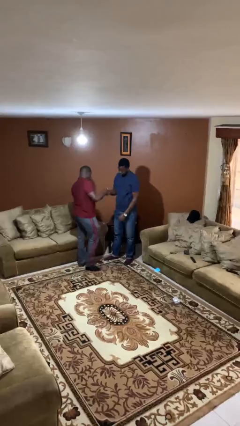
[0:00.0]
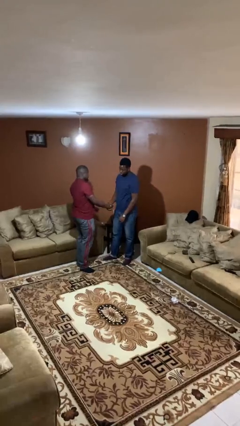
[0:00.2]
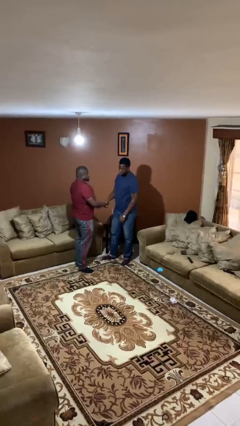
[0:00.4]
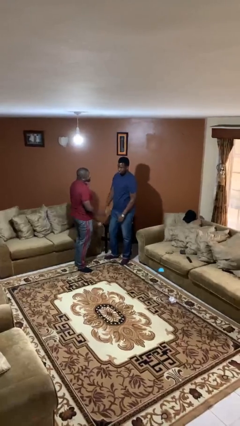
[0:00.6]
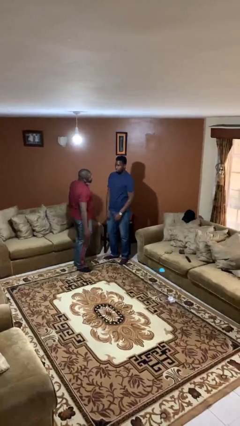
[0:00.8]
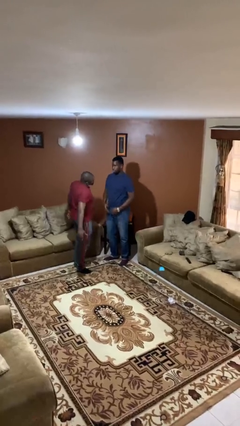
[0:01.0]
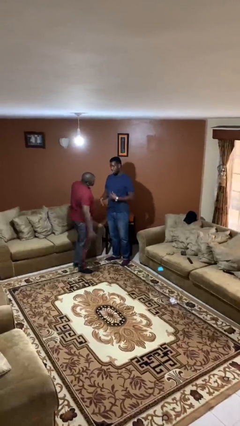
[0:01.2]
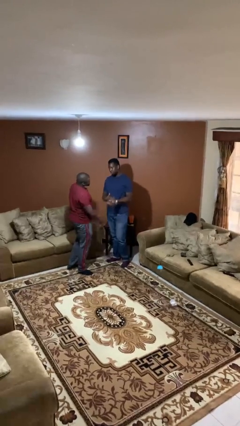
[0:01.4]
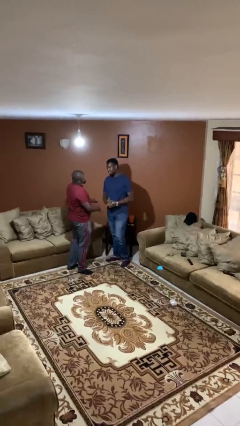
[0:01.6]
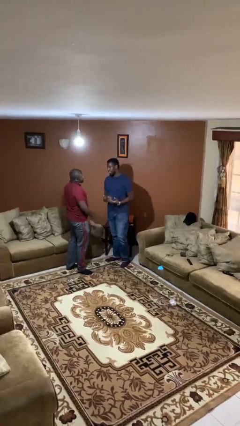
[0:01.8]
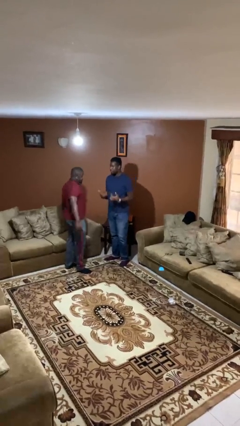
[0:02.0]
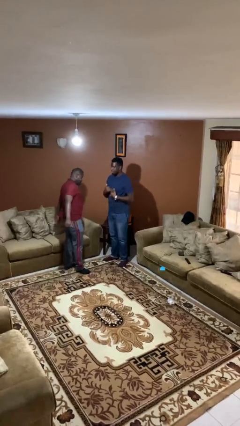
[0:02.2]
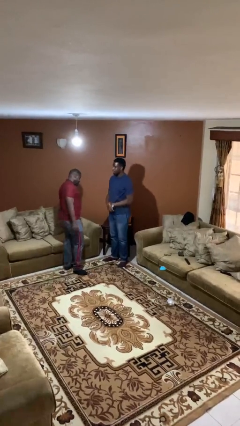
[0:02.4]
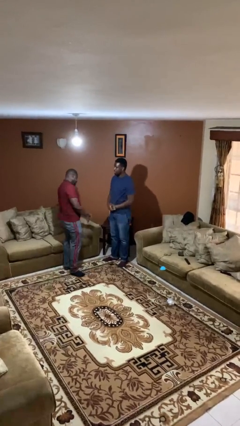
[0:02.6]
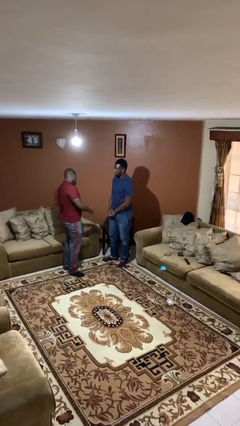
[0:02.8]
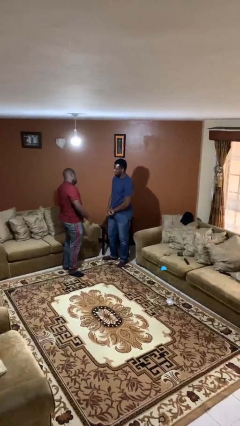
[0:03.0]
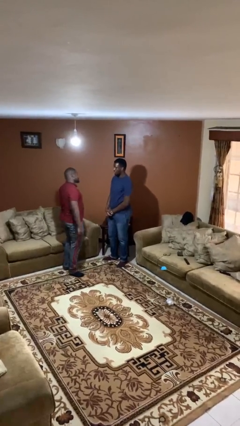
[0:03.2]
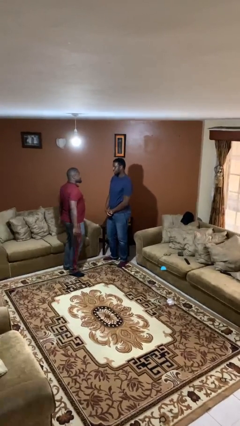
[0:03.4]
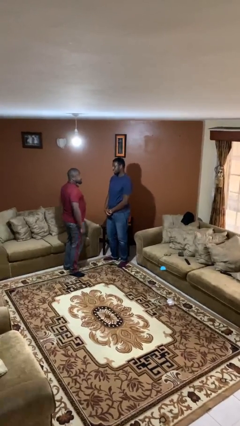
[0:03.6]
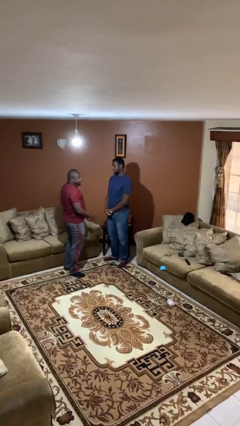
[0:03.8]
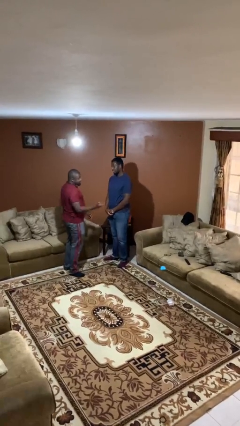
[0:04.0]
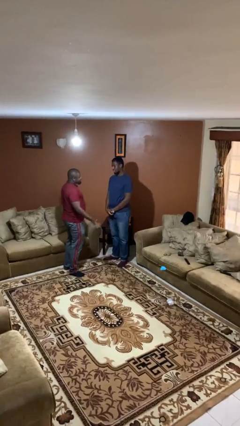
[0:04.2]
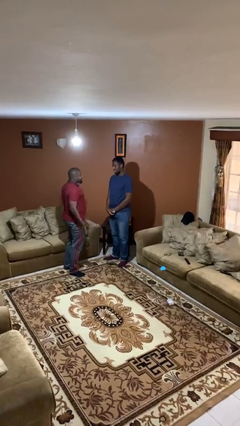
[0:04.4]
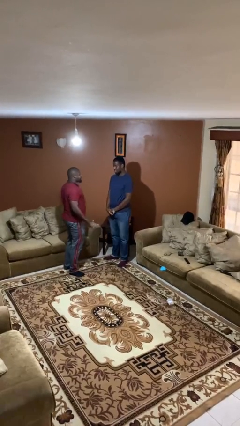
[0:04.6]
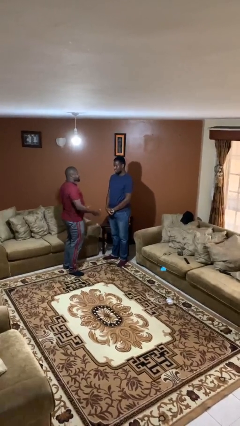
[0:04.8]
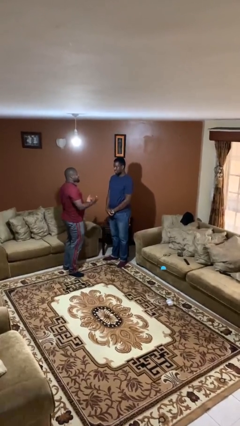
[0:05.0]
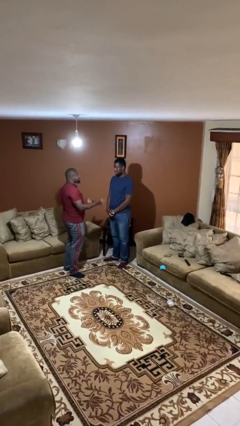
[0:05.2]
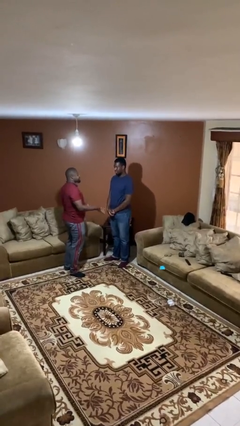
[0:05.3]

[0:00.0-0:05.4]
person talks to person

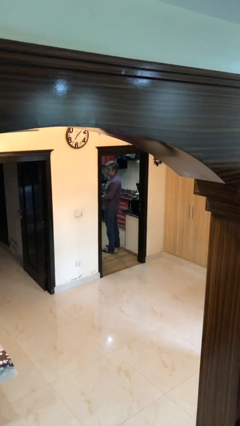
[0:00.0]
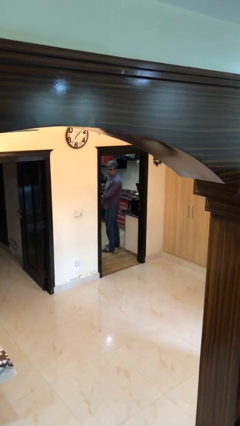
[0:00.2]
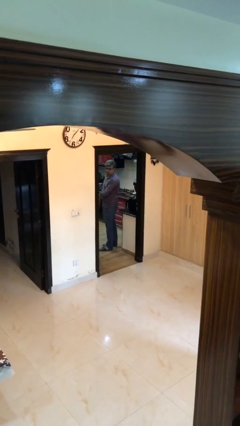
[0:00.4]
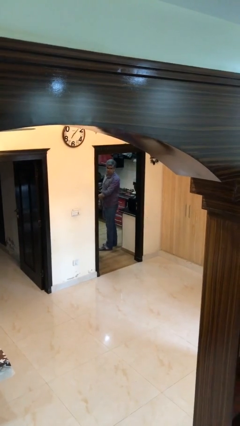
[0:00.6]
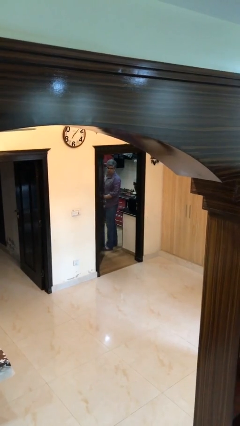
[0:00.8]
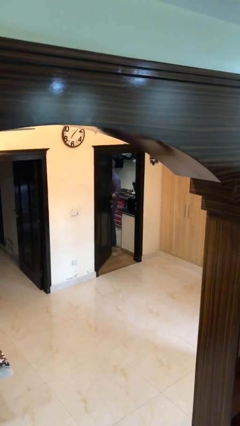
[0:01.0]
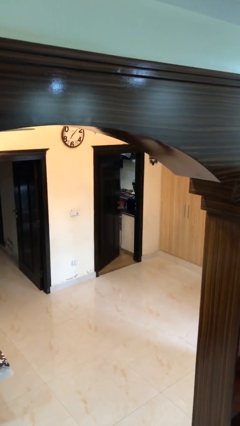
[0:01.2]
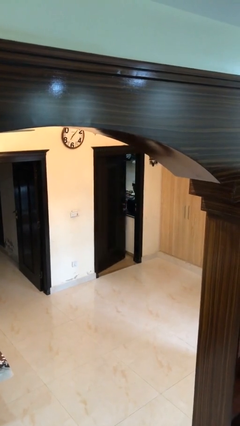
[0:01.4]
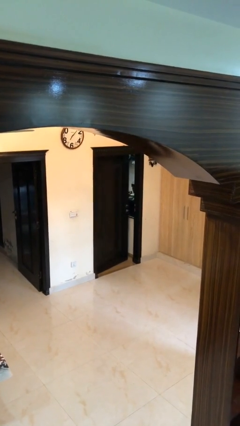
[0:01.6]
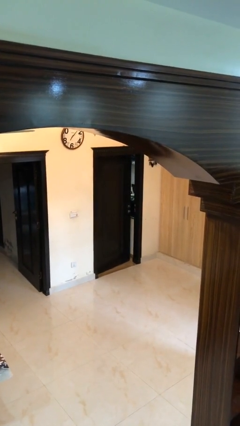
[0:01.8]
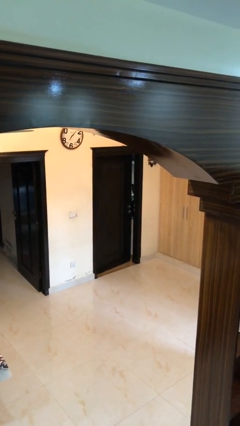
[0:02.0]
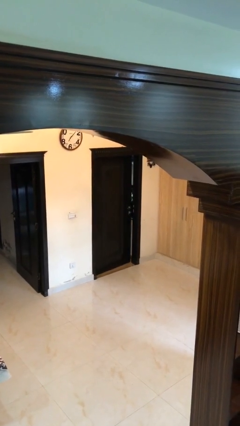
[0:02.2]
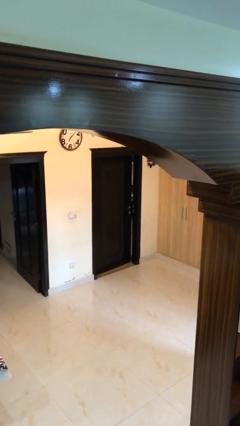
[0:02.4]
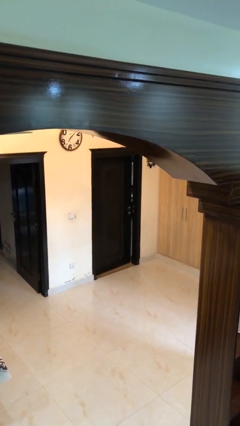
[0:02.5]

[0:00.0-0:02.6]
person closes facility door

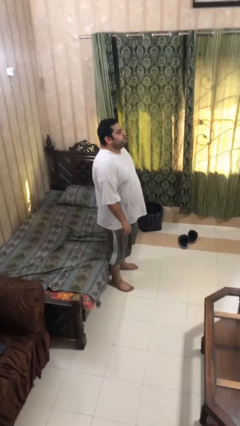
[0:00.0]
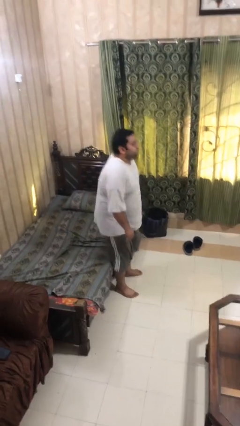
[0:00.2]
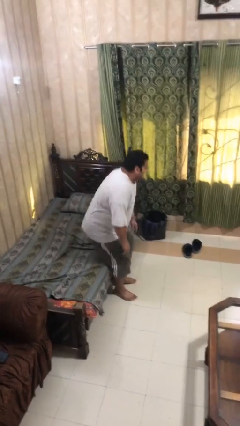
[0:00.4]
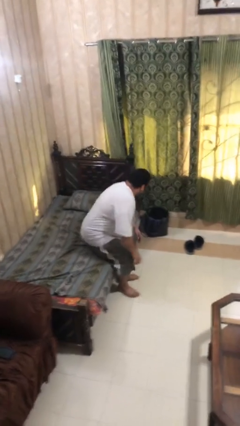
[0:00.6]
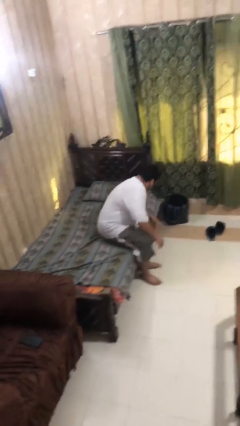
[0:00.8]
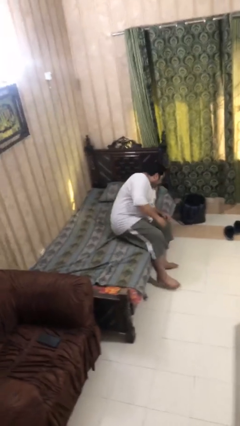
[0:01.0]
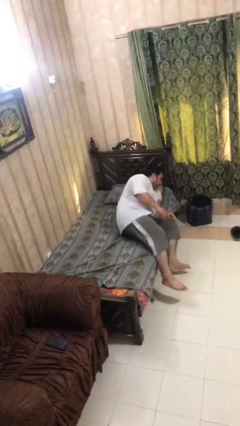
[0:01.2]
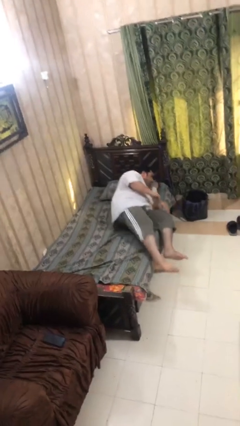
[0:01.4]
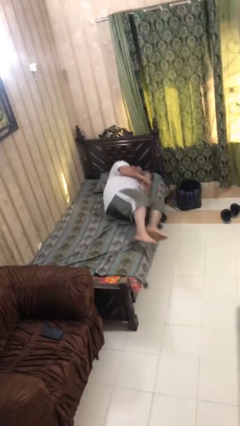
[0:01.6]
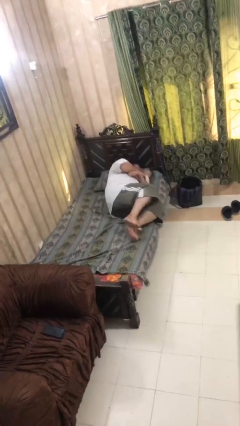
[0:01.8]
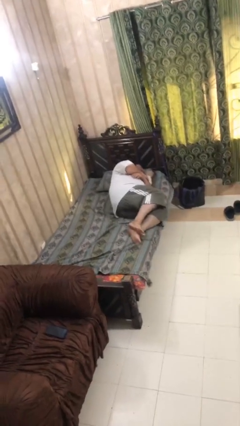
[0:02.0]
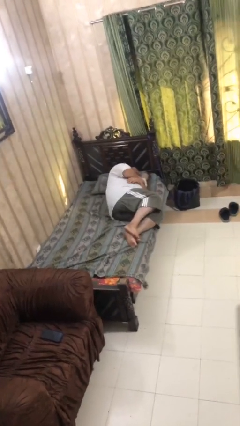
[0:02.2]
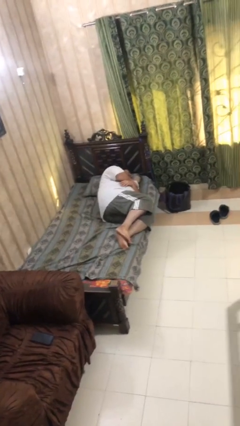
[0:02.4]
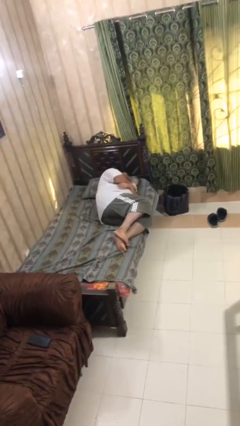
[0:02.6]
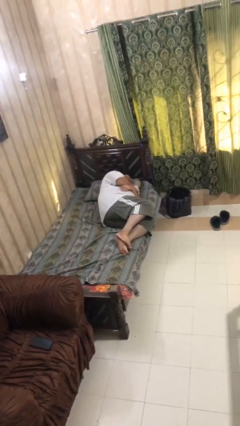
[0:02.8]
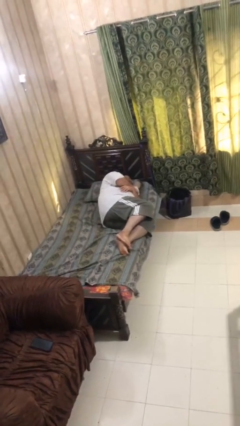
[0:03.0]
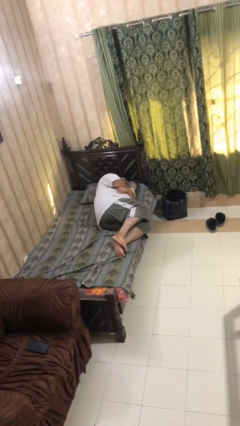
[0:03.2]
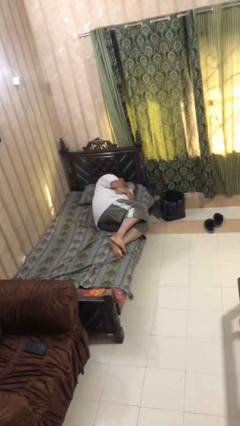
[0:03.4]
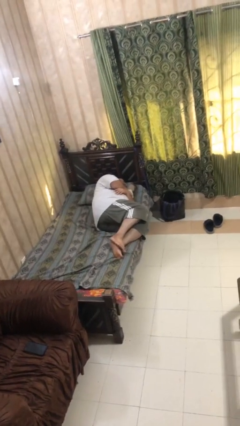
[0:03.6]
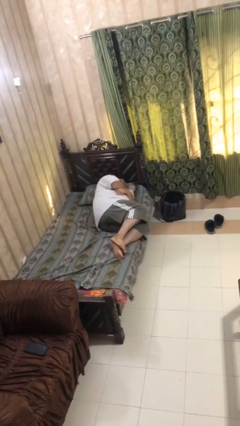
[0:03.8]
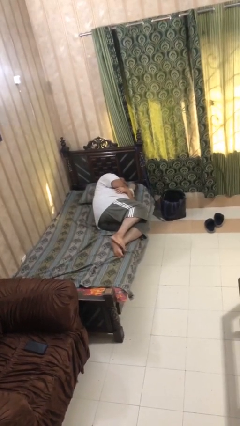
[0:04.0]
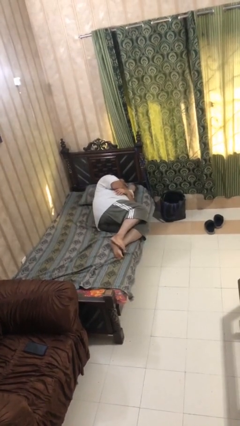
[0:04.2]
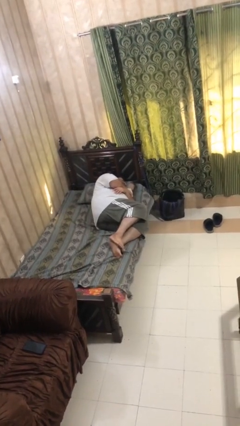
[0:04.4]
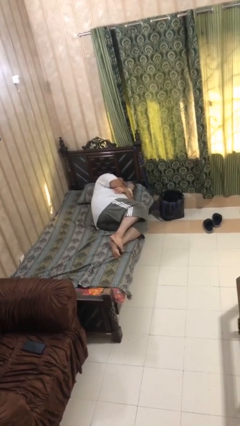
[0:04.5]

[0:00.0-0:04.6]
person lies down on bed

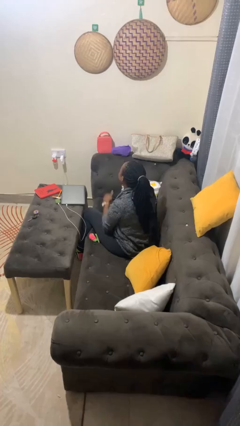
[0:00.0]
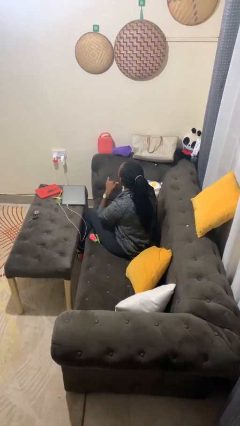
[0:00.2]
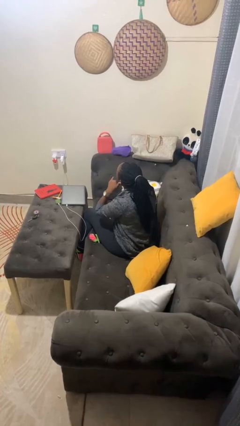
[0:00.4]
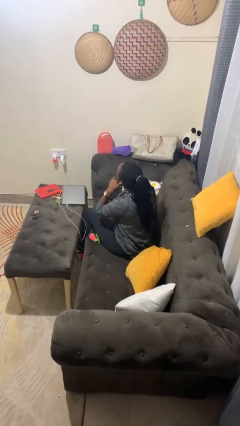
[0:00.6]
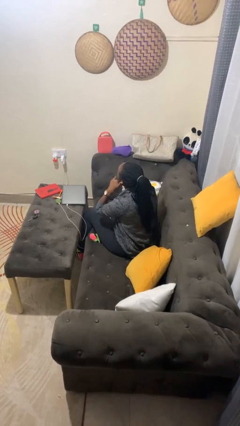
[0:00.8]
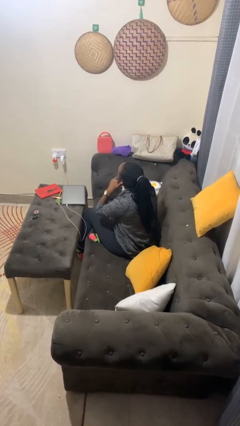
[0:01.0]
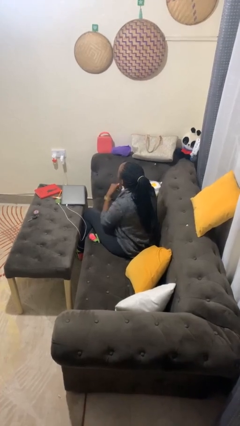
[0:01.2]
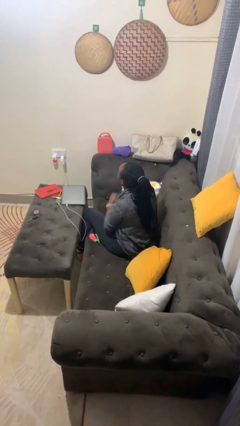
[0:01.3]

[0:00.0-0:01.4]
person gestures call me

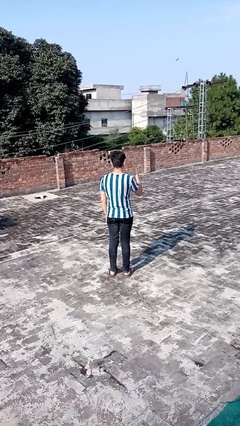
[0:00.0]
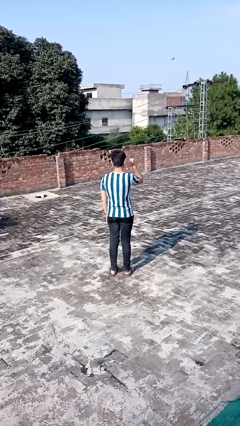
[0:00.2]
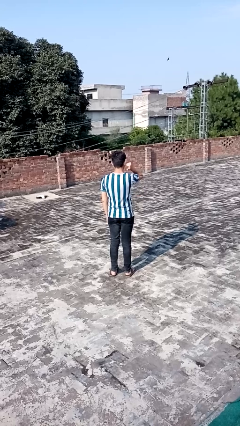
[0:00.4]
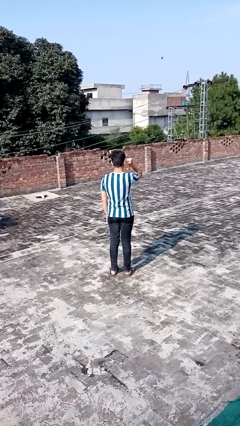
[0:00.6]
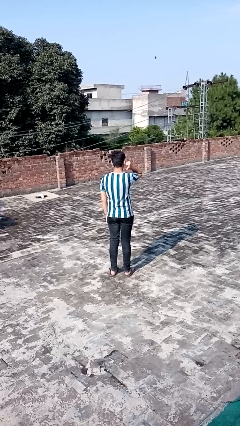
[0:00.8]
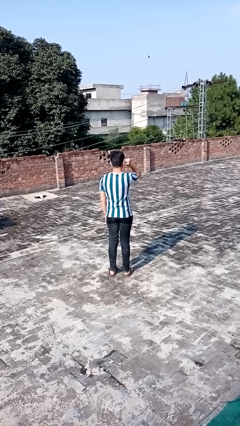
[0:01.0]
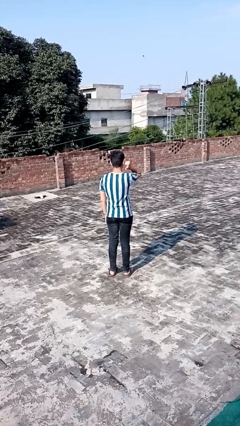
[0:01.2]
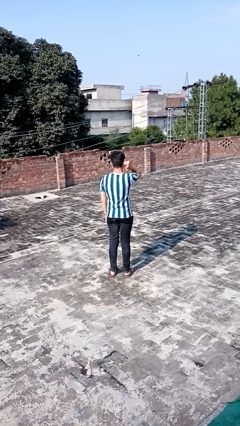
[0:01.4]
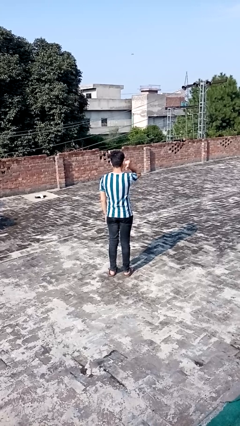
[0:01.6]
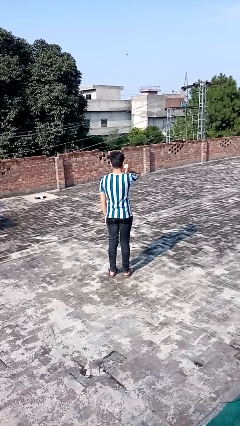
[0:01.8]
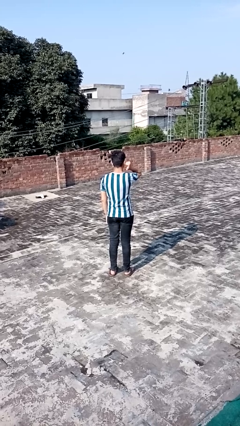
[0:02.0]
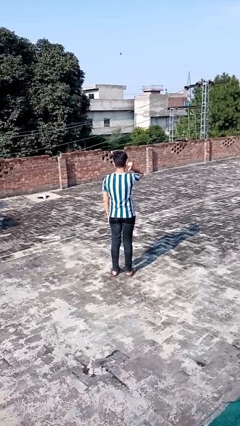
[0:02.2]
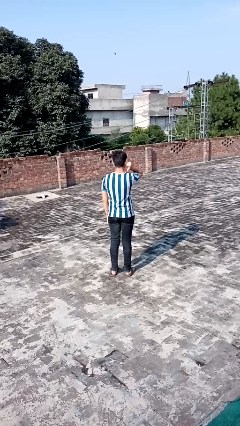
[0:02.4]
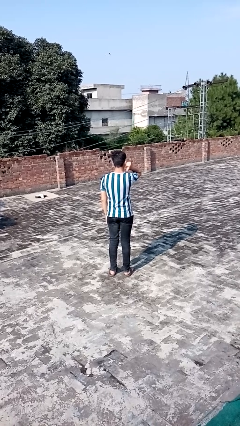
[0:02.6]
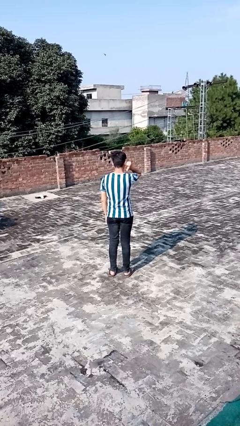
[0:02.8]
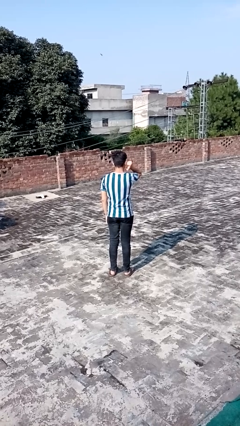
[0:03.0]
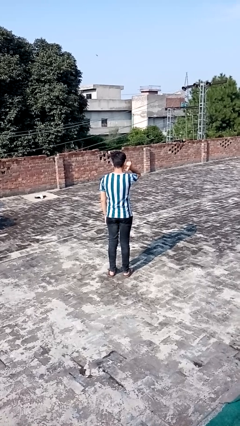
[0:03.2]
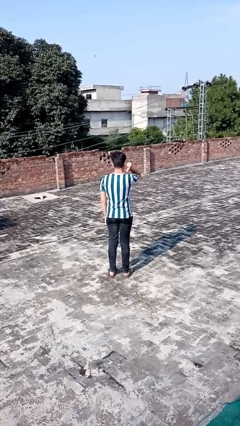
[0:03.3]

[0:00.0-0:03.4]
person gestures behind me
